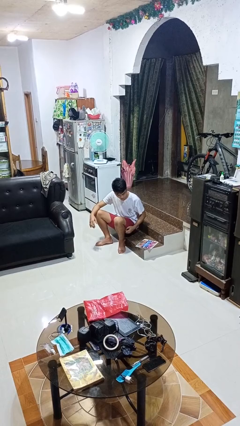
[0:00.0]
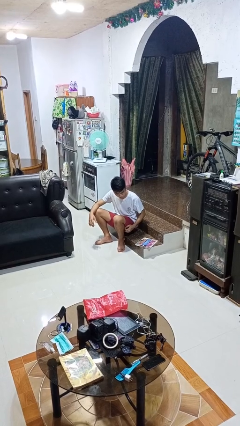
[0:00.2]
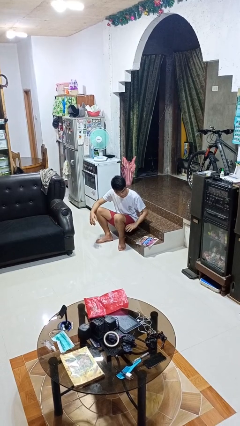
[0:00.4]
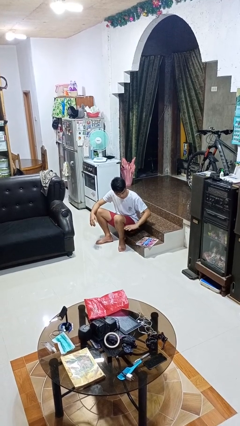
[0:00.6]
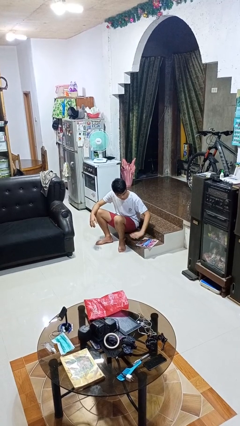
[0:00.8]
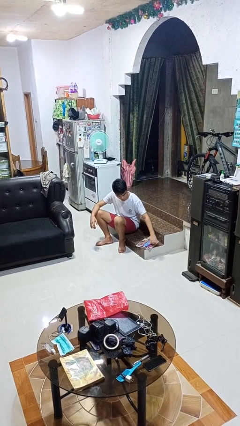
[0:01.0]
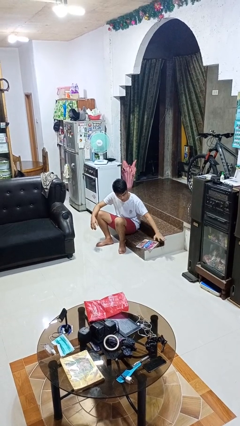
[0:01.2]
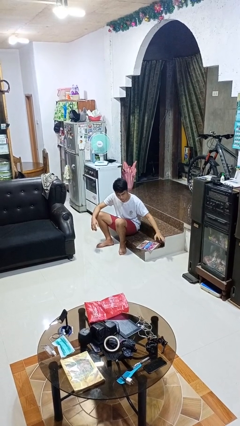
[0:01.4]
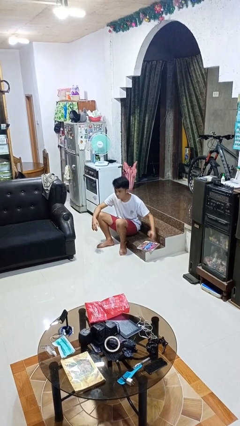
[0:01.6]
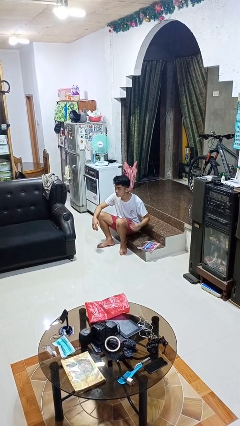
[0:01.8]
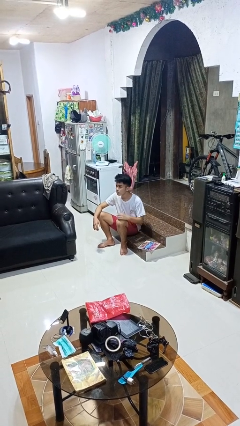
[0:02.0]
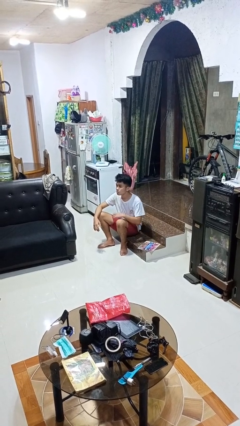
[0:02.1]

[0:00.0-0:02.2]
person waves hand over object

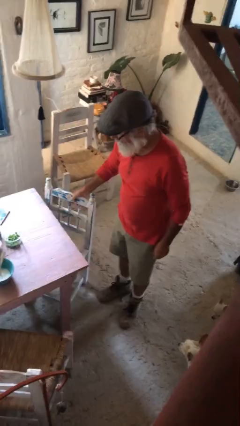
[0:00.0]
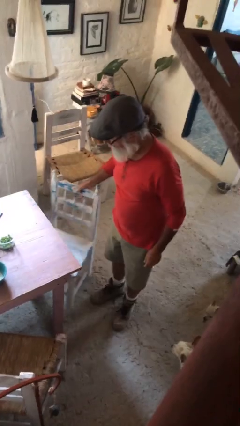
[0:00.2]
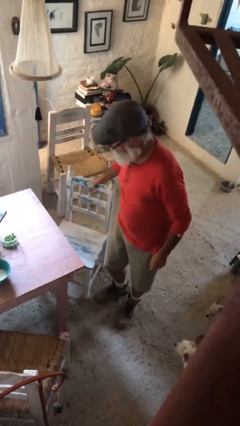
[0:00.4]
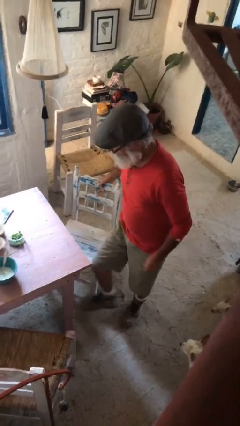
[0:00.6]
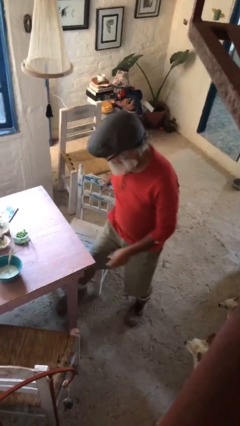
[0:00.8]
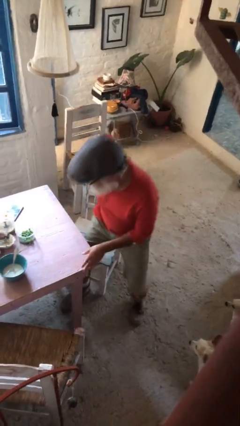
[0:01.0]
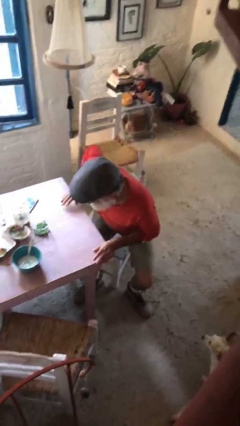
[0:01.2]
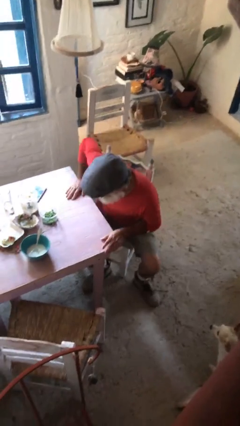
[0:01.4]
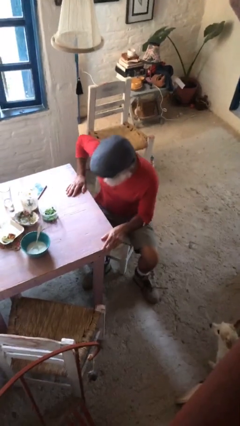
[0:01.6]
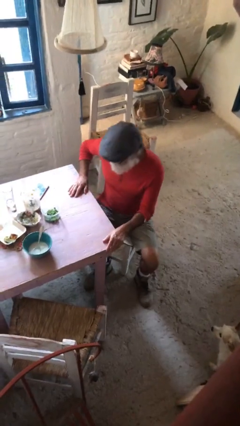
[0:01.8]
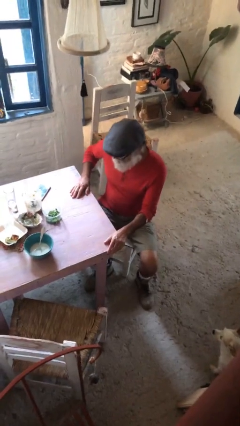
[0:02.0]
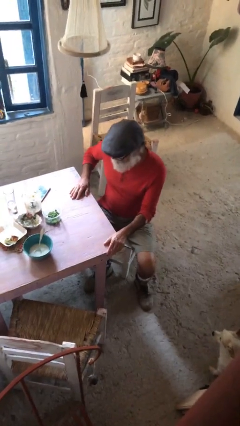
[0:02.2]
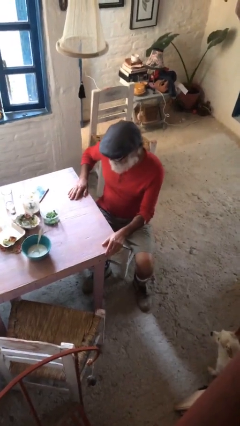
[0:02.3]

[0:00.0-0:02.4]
person sits down

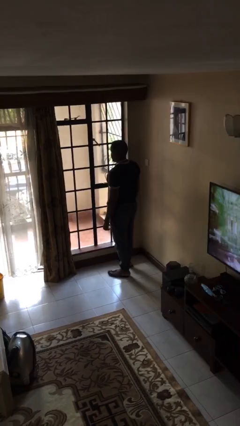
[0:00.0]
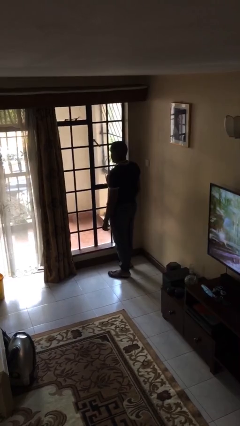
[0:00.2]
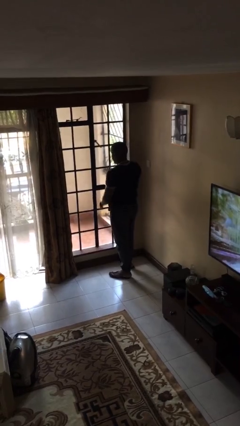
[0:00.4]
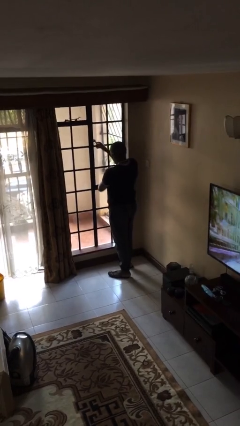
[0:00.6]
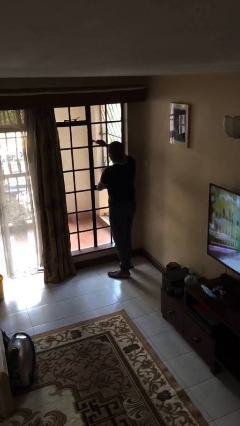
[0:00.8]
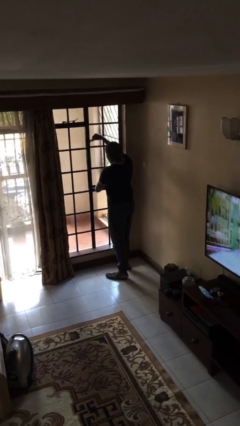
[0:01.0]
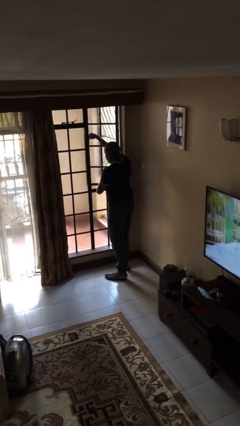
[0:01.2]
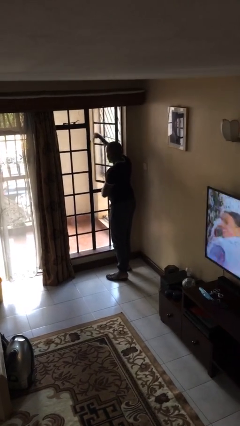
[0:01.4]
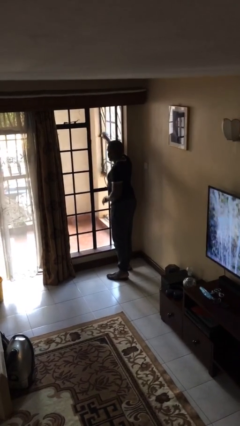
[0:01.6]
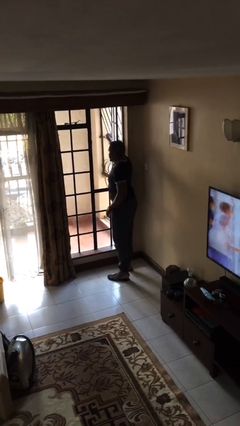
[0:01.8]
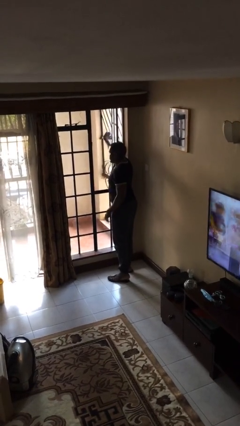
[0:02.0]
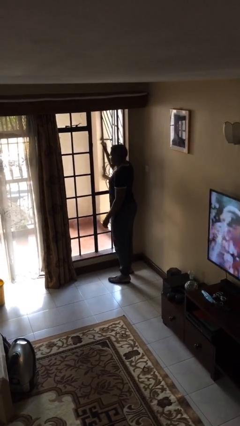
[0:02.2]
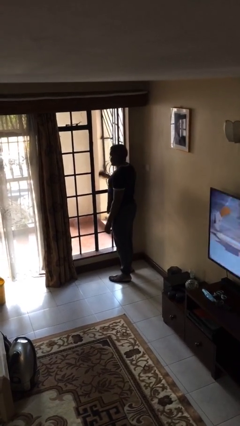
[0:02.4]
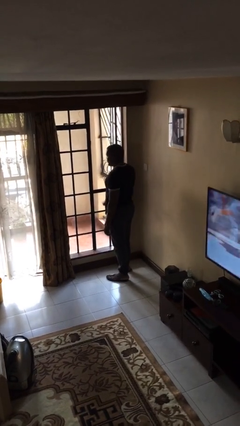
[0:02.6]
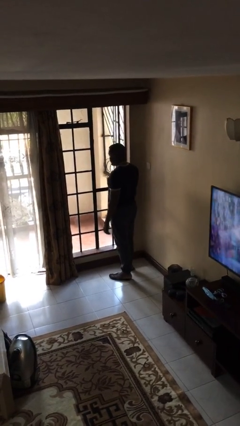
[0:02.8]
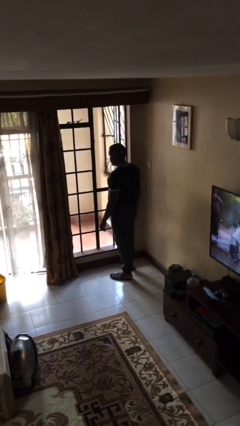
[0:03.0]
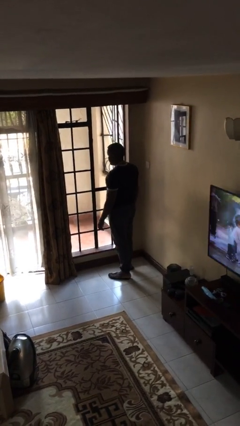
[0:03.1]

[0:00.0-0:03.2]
person opens home window

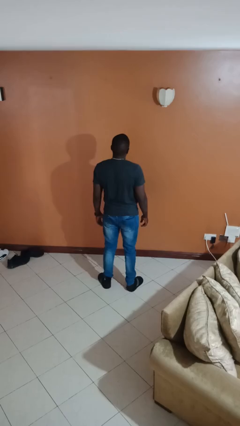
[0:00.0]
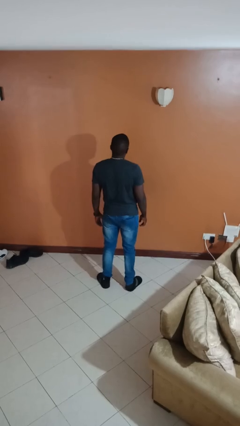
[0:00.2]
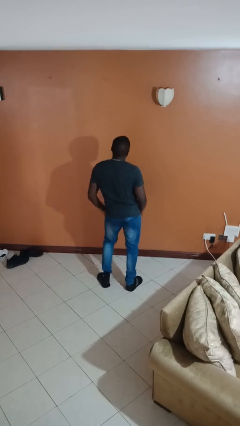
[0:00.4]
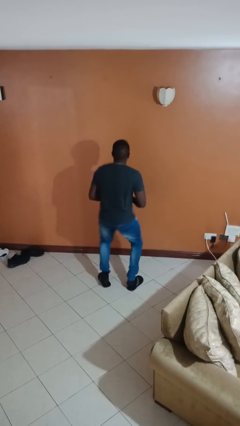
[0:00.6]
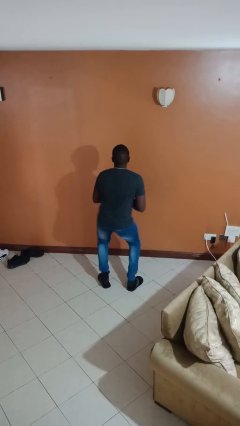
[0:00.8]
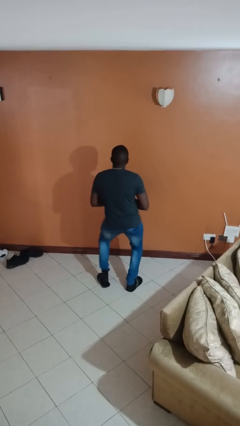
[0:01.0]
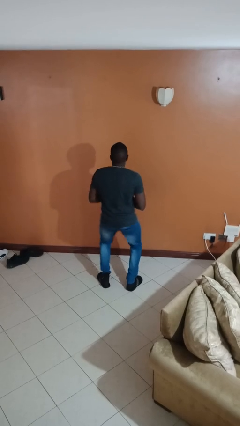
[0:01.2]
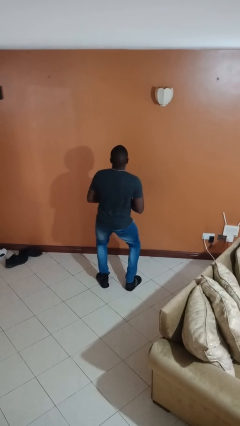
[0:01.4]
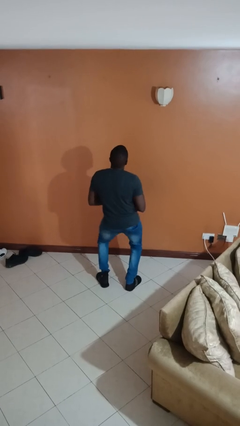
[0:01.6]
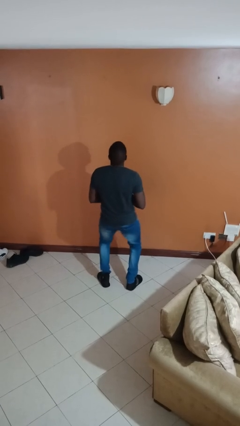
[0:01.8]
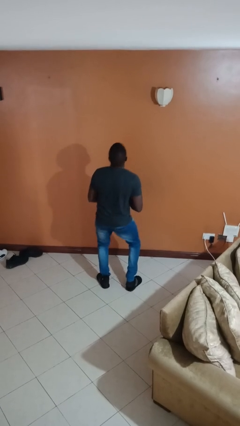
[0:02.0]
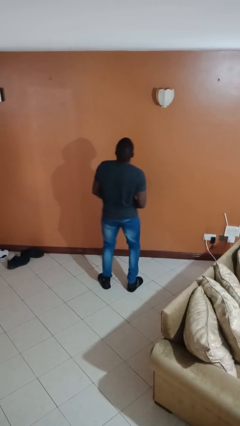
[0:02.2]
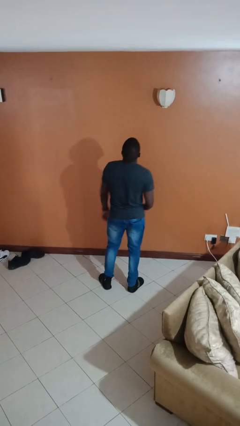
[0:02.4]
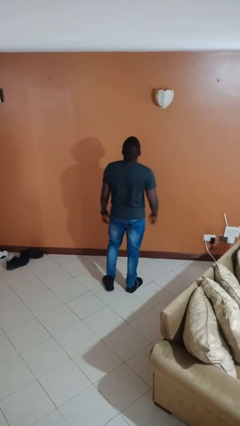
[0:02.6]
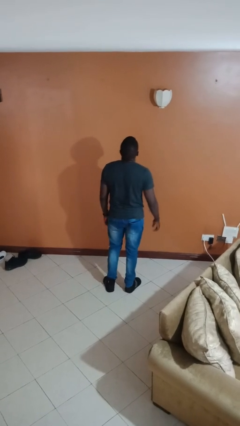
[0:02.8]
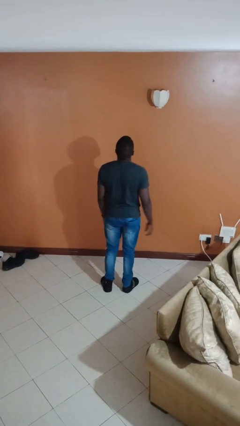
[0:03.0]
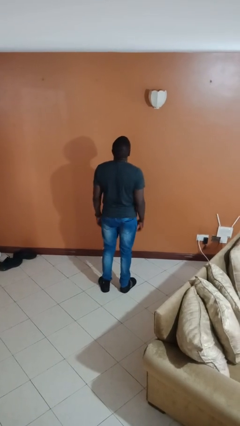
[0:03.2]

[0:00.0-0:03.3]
person wiggles hips

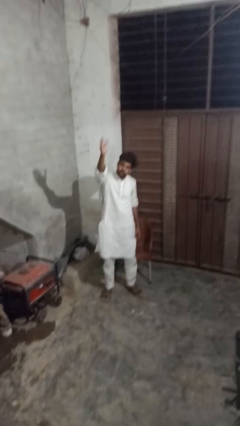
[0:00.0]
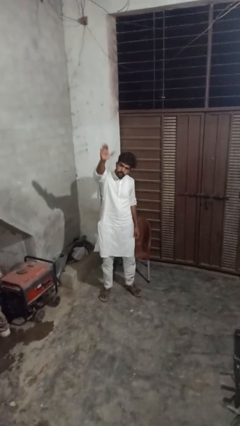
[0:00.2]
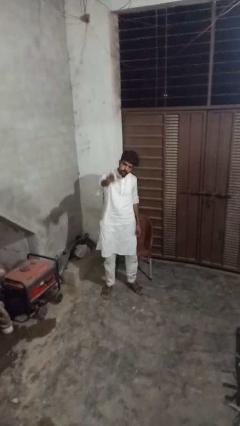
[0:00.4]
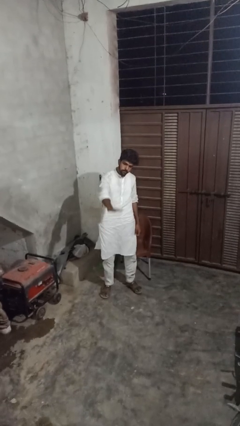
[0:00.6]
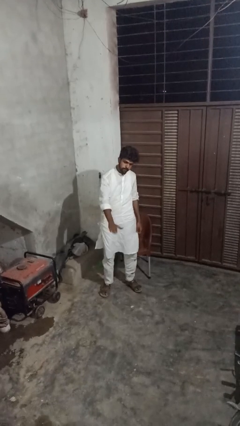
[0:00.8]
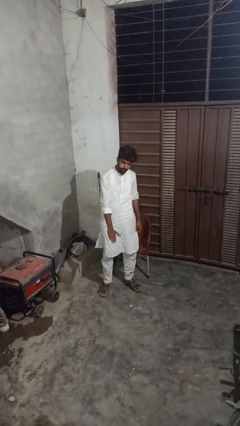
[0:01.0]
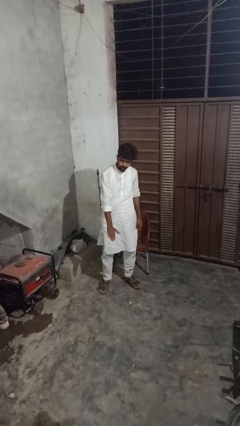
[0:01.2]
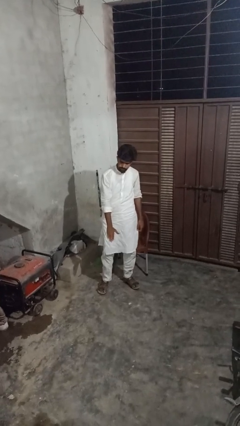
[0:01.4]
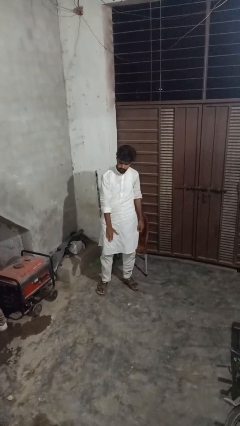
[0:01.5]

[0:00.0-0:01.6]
person gestures swipe down

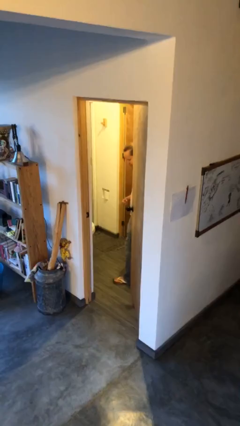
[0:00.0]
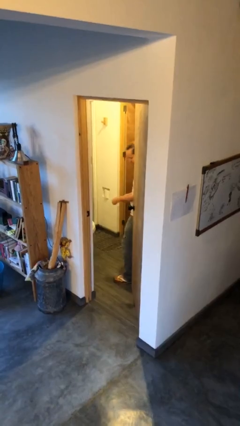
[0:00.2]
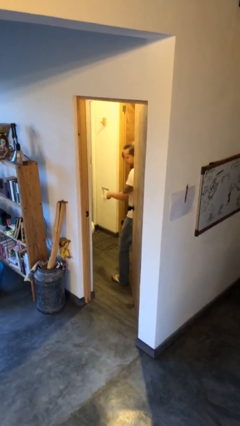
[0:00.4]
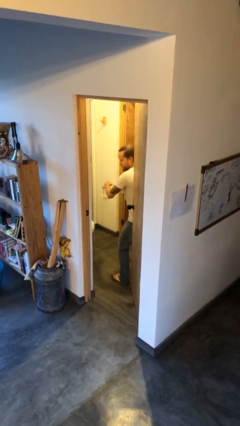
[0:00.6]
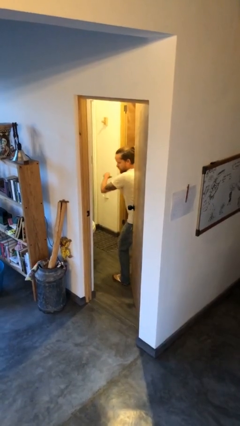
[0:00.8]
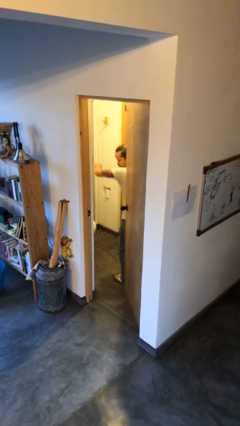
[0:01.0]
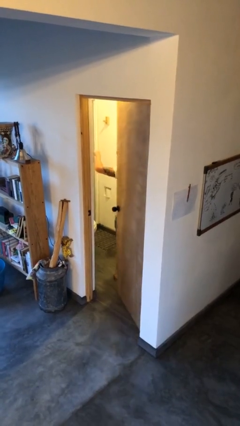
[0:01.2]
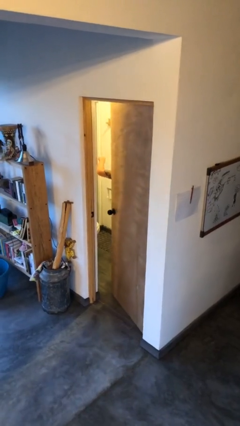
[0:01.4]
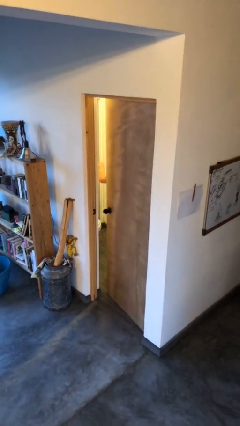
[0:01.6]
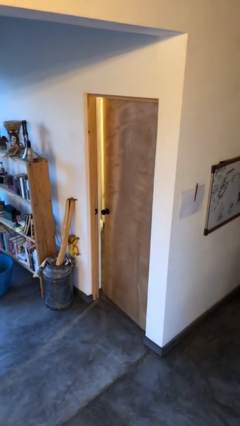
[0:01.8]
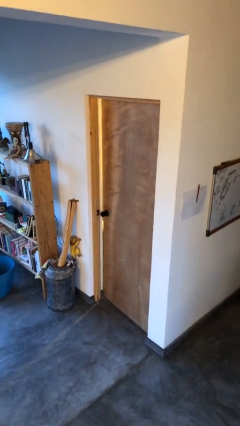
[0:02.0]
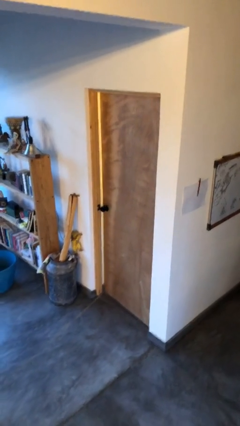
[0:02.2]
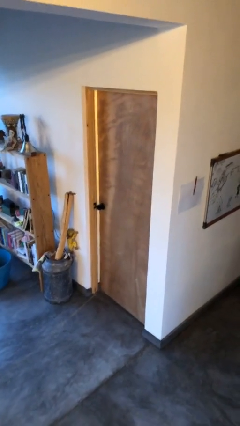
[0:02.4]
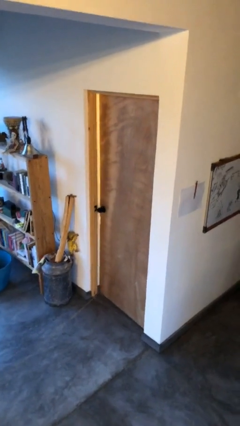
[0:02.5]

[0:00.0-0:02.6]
person closes door with hip

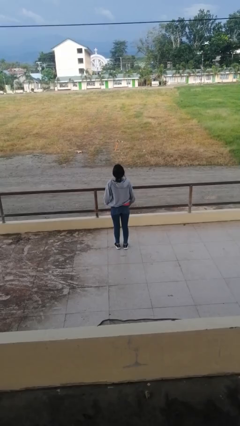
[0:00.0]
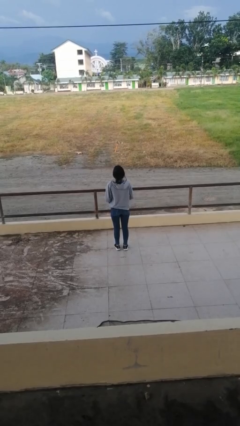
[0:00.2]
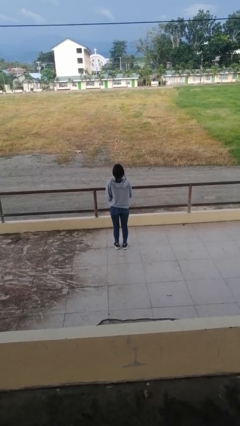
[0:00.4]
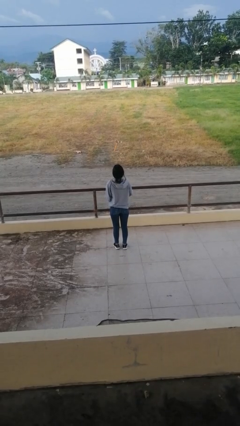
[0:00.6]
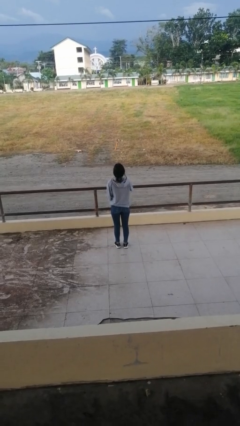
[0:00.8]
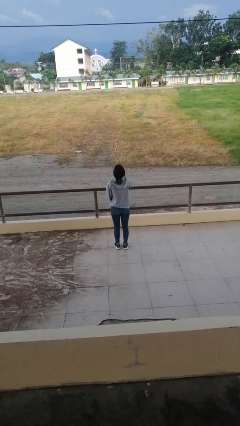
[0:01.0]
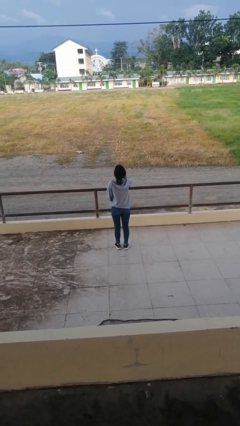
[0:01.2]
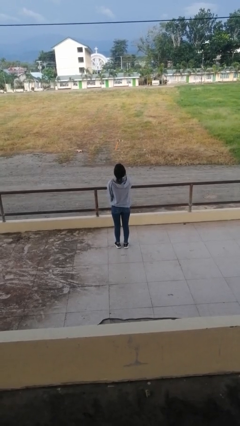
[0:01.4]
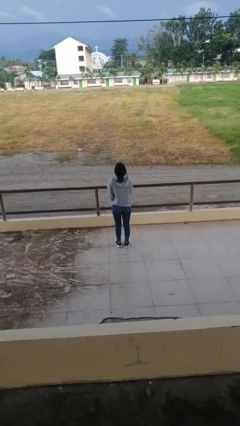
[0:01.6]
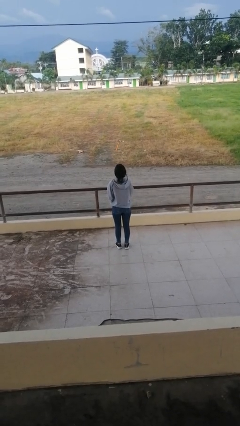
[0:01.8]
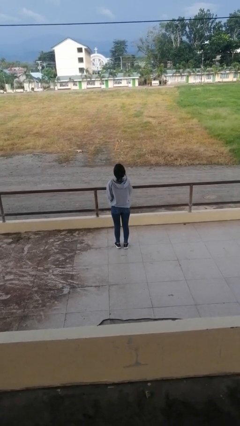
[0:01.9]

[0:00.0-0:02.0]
person zips up jacket
